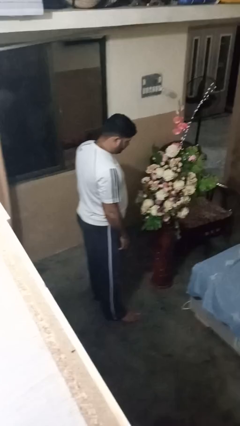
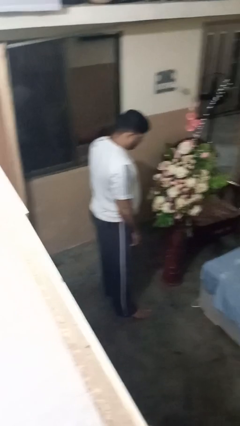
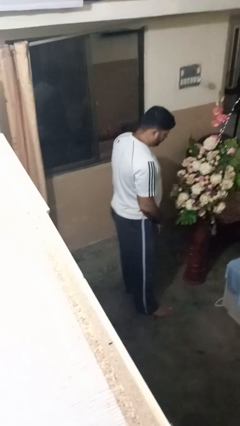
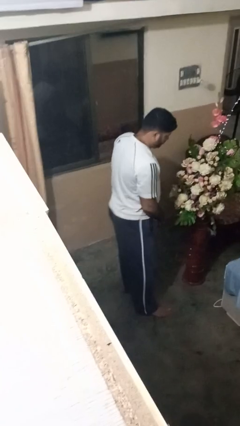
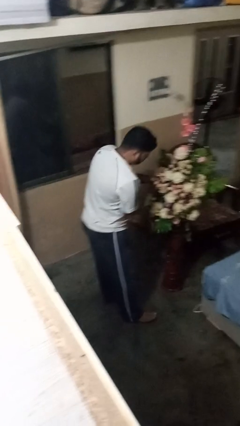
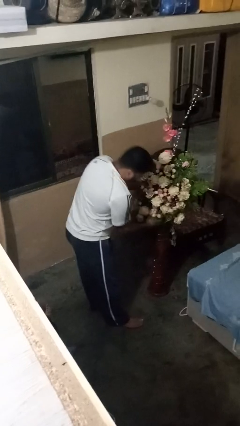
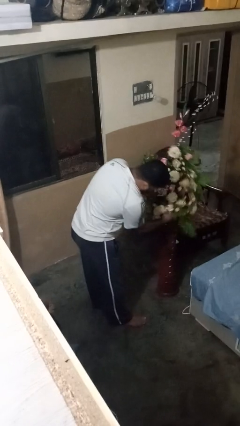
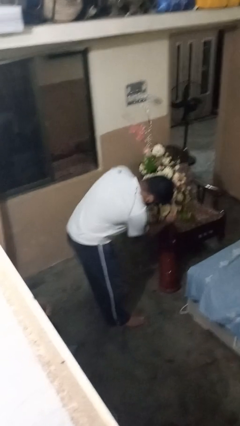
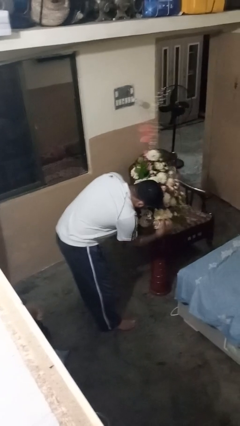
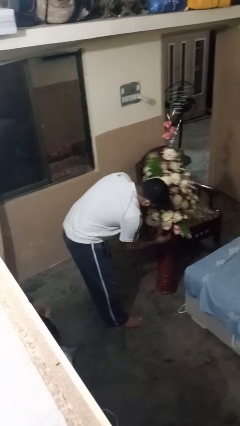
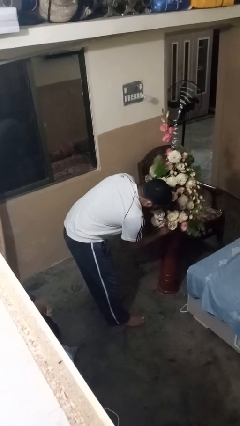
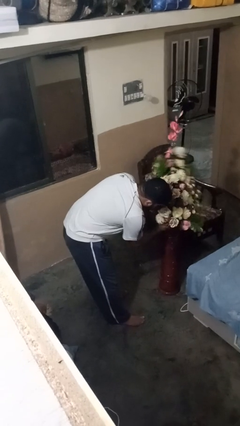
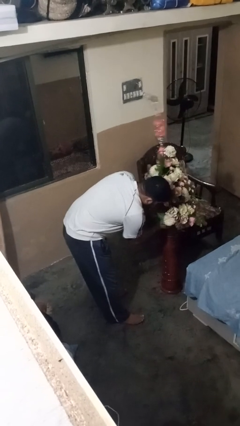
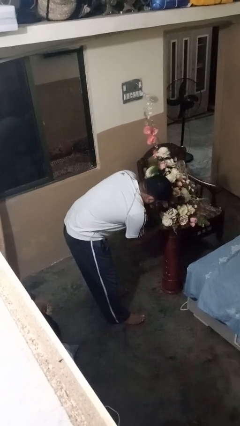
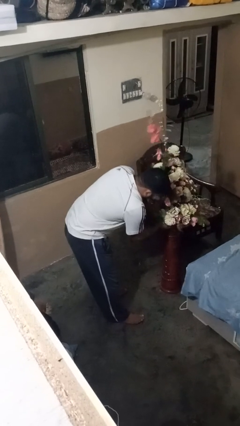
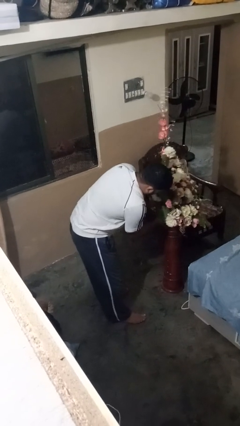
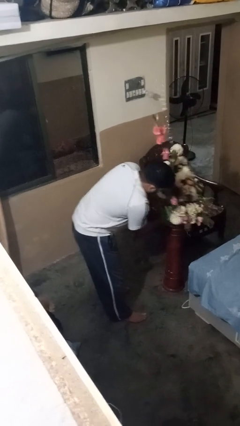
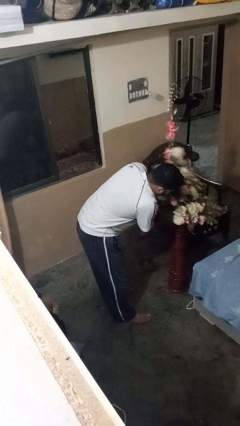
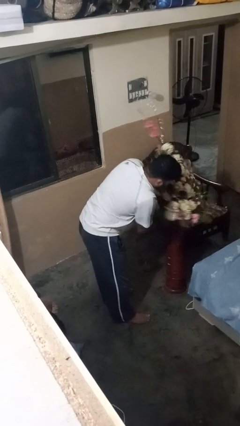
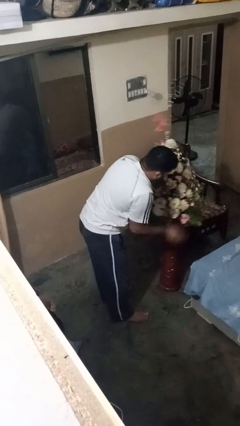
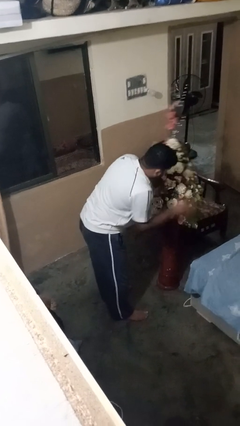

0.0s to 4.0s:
person arranges flowers in vase

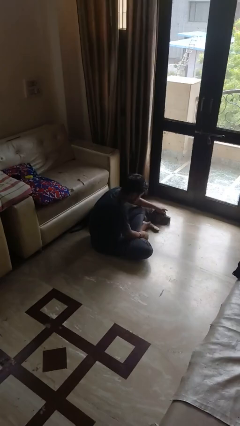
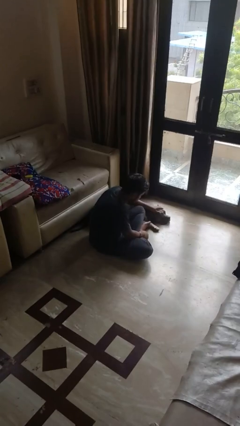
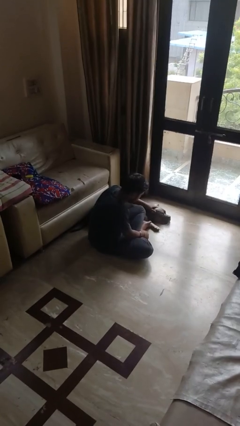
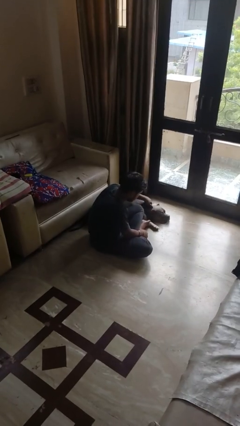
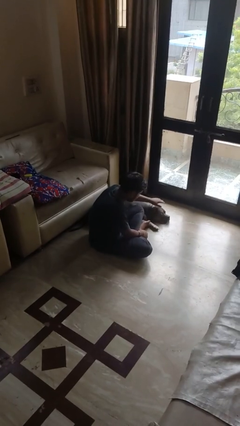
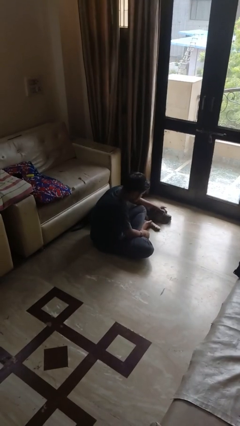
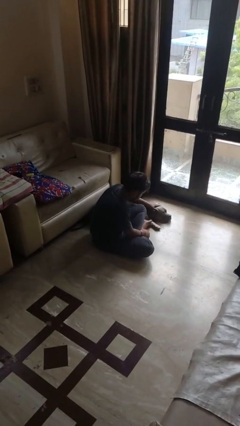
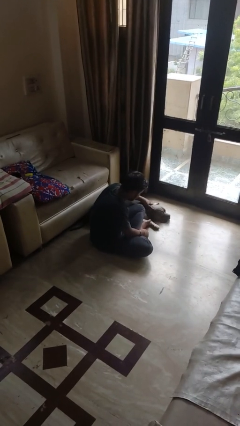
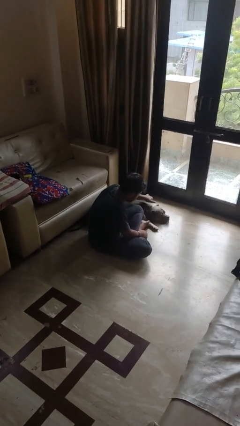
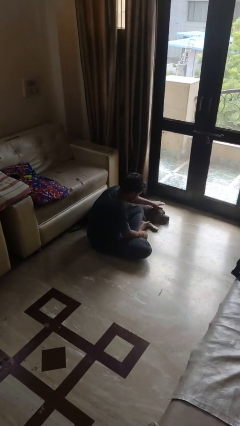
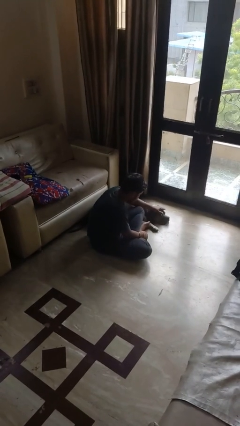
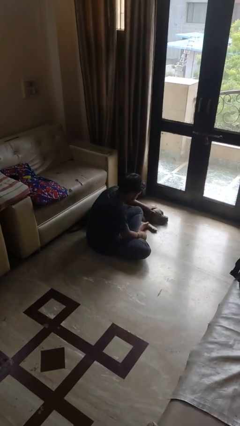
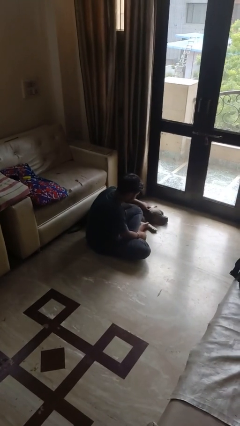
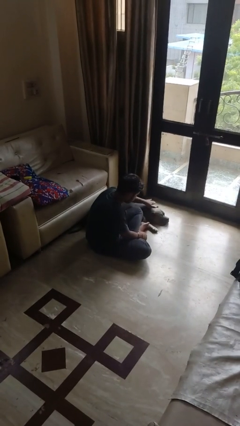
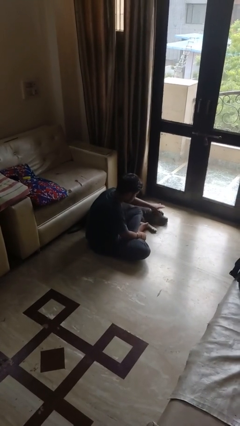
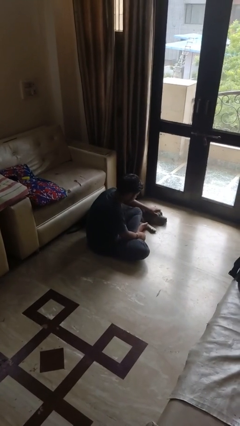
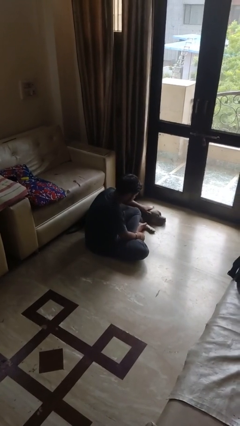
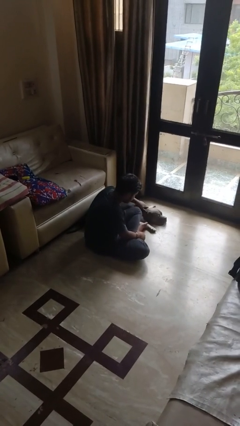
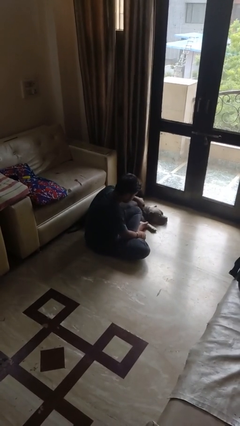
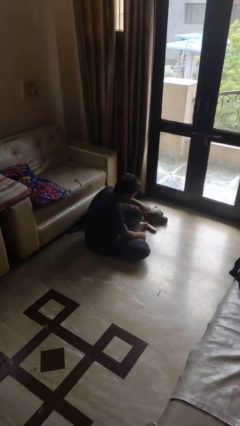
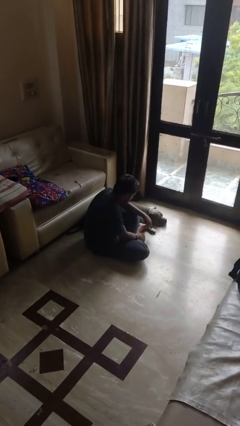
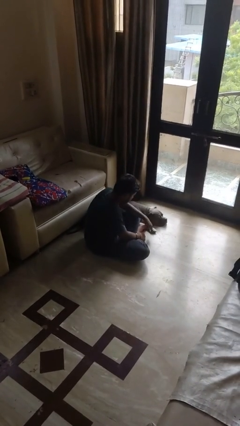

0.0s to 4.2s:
person pets dog

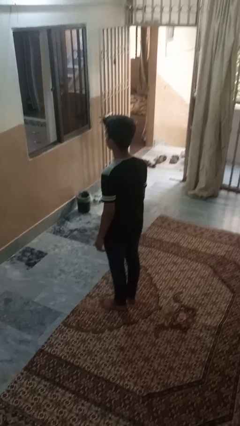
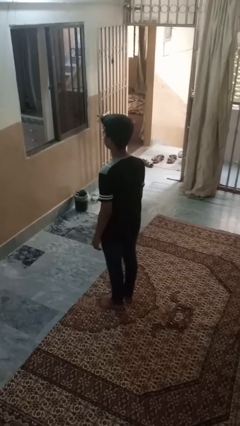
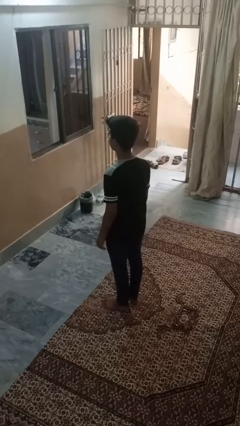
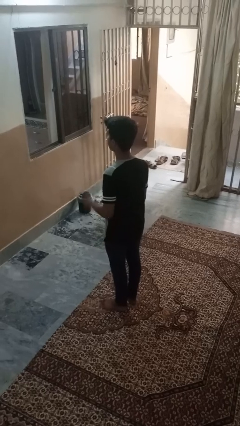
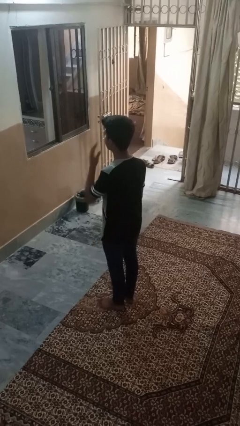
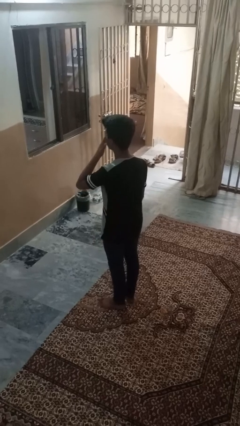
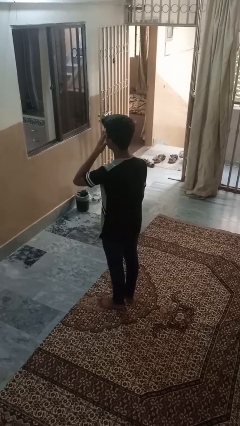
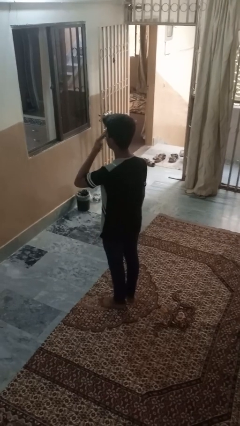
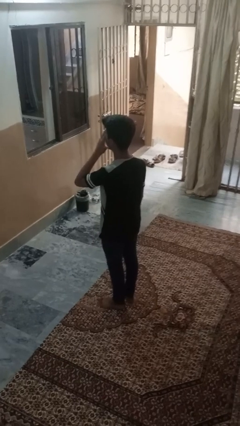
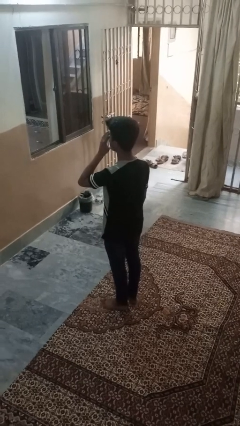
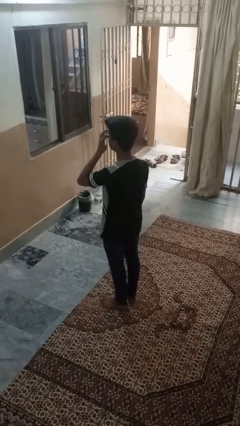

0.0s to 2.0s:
person rubs eyes

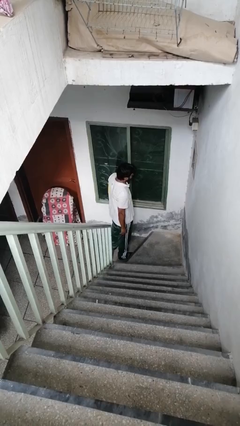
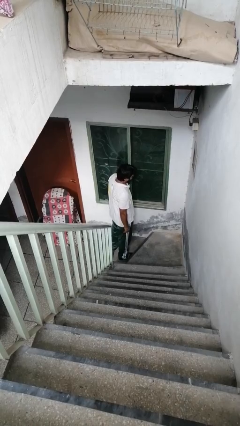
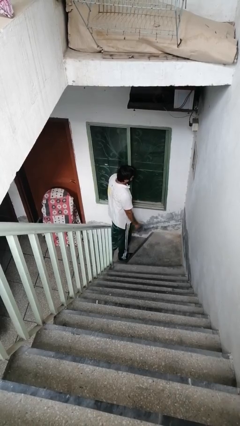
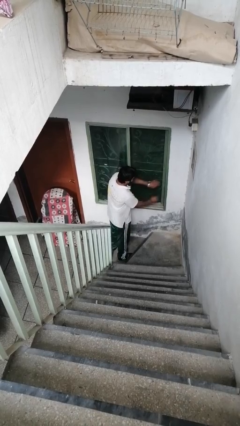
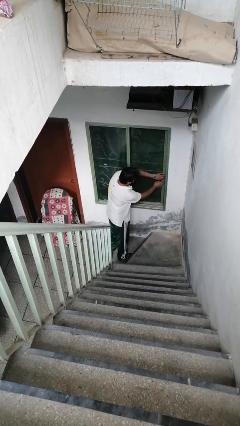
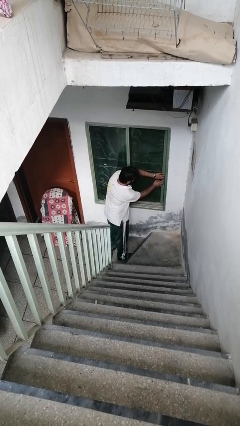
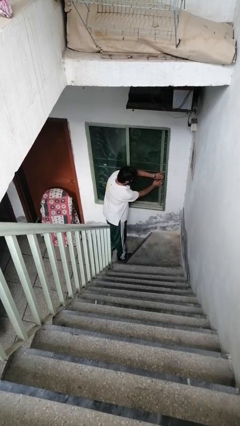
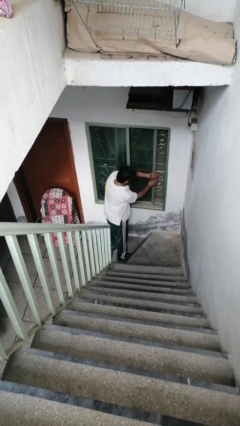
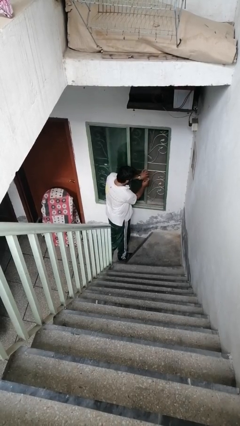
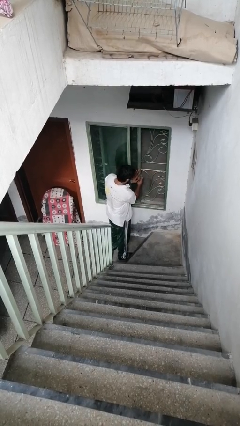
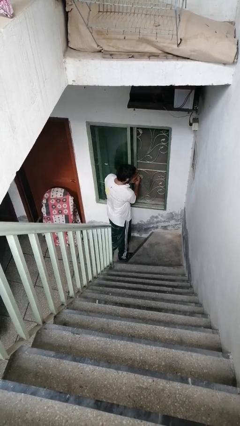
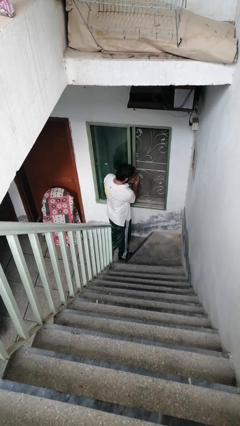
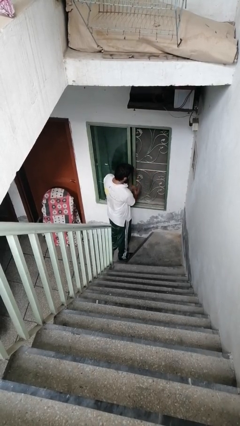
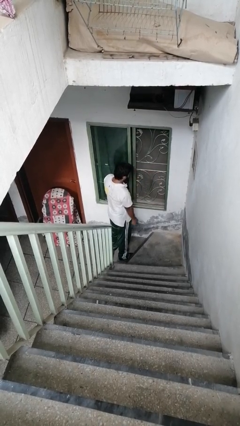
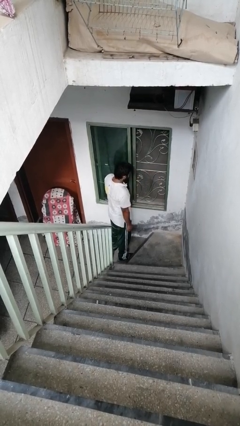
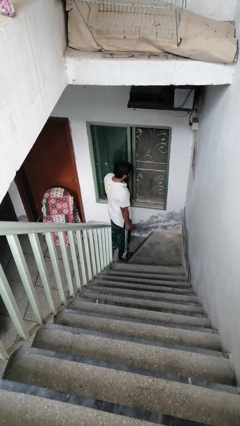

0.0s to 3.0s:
person opens home window

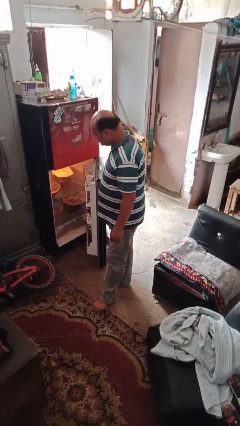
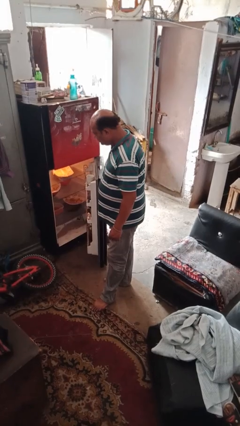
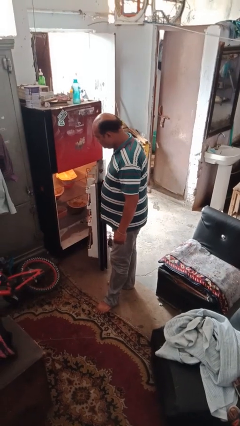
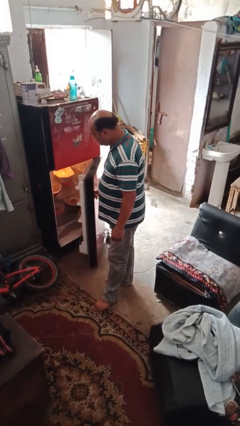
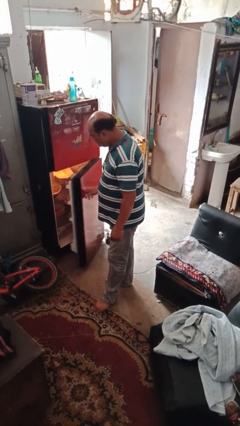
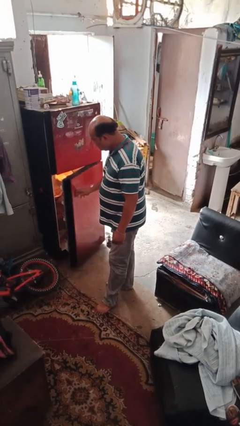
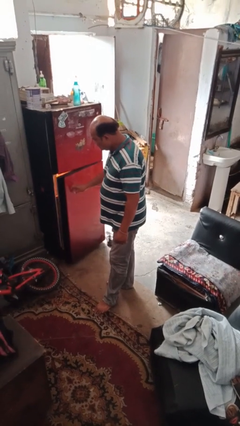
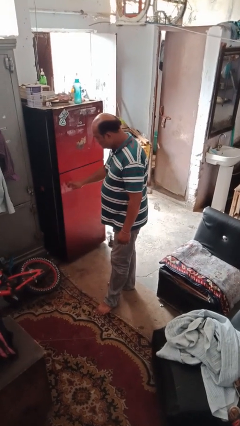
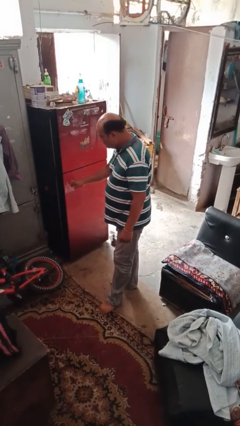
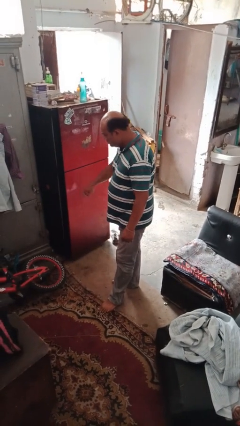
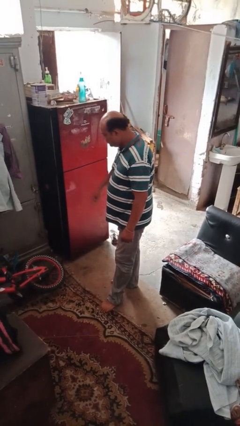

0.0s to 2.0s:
person closes refrigerator

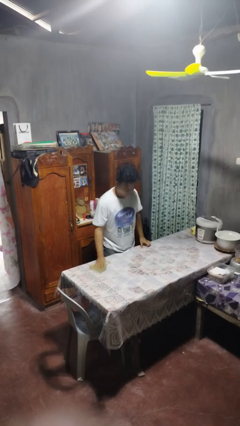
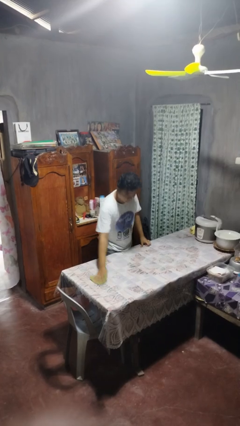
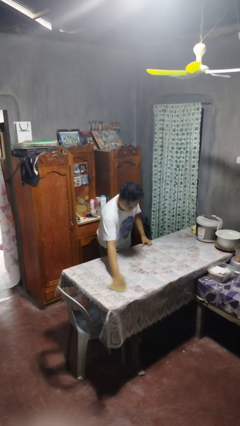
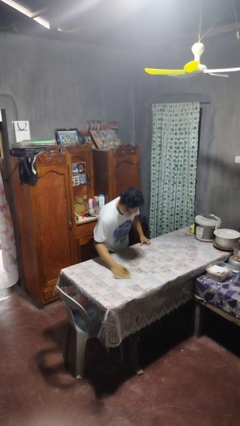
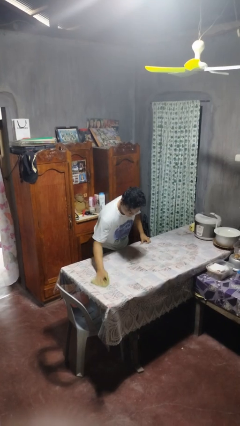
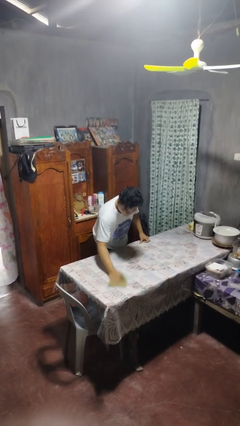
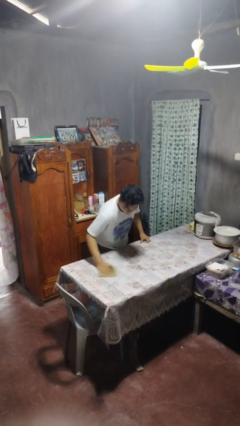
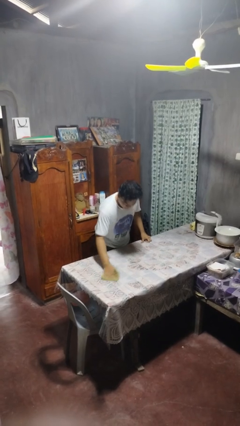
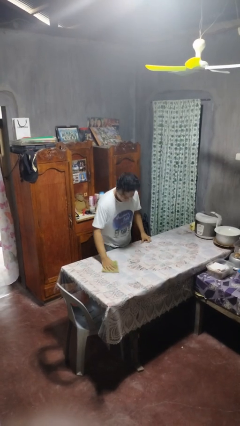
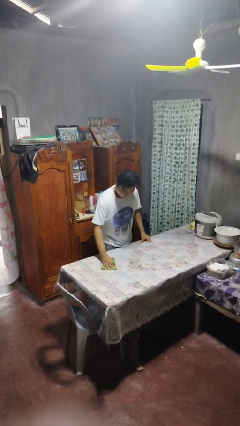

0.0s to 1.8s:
person cleans table with rag

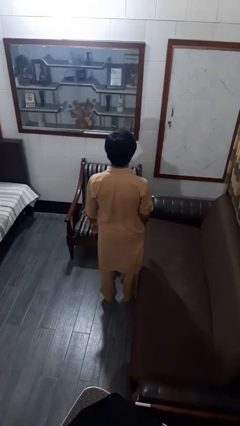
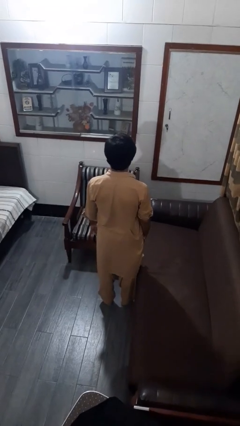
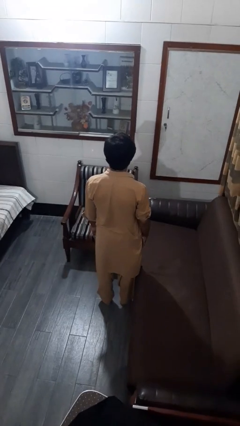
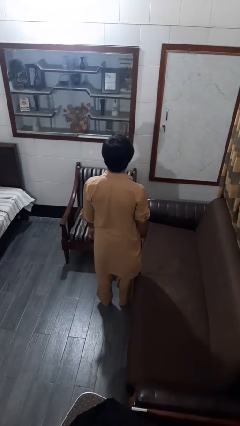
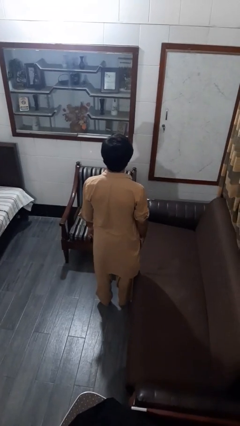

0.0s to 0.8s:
person climbs on couch
